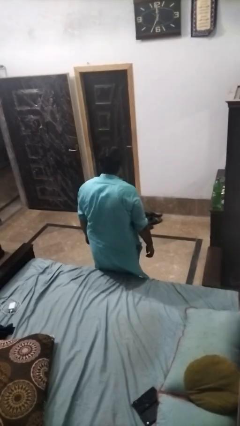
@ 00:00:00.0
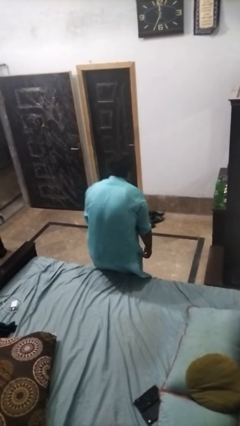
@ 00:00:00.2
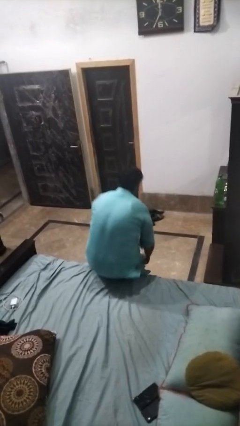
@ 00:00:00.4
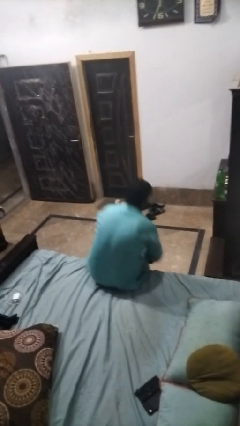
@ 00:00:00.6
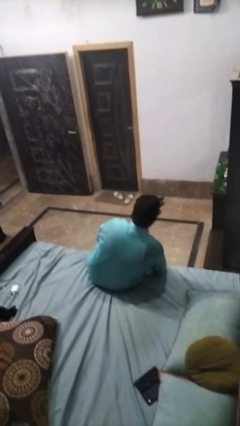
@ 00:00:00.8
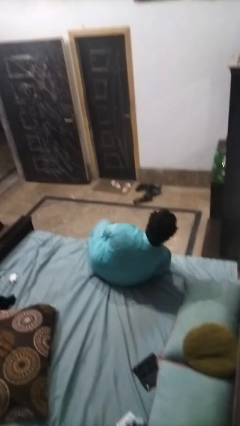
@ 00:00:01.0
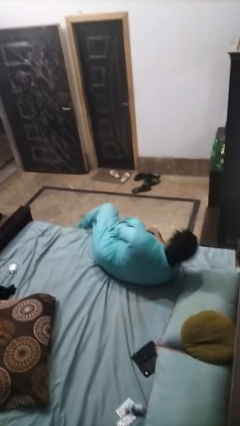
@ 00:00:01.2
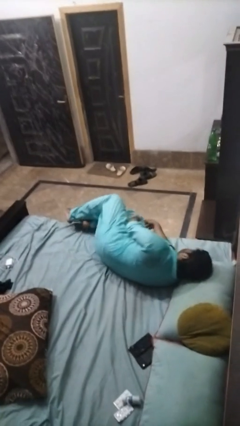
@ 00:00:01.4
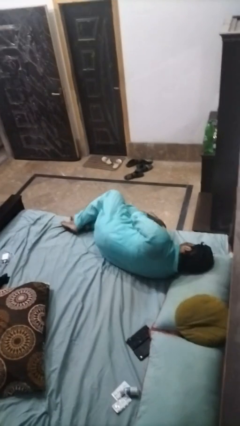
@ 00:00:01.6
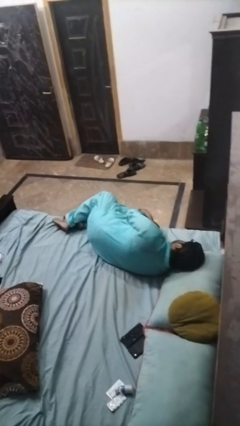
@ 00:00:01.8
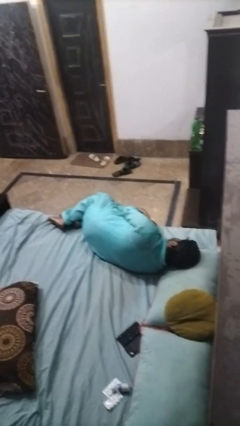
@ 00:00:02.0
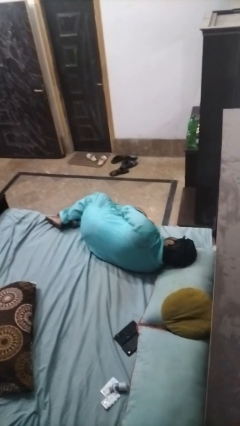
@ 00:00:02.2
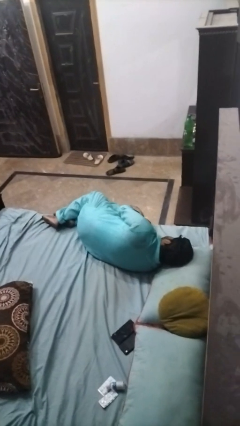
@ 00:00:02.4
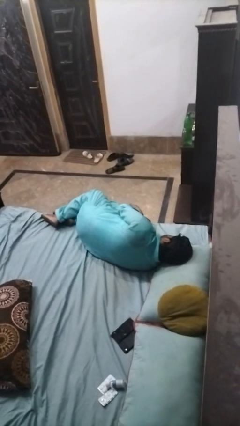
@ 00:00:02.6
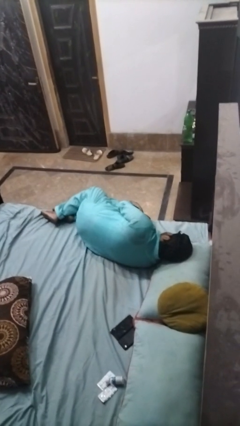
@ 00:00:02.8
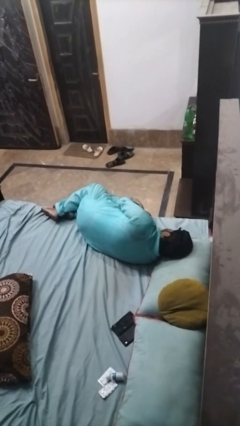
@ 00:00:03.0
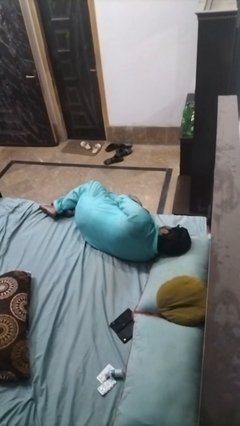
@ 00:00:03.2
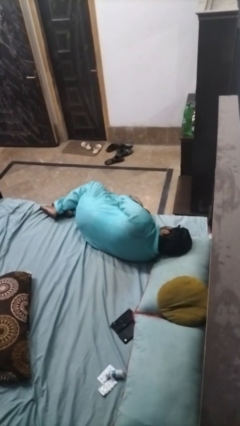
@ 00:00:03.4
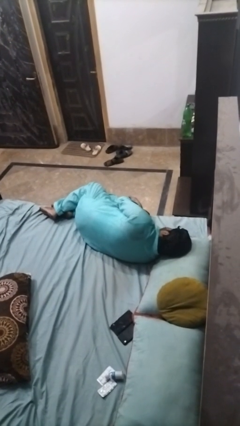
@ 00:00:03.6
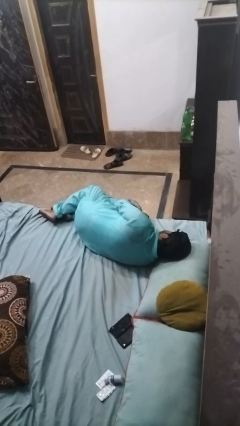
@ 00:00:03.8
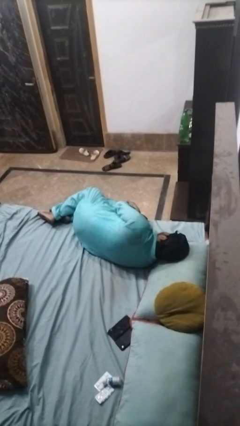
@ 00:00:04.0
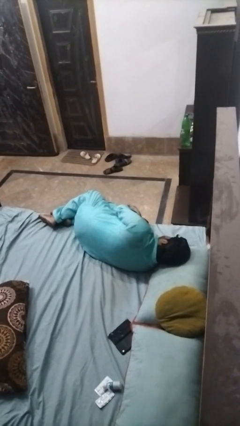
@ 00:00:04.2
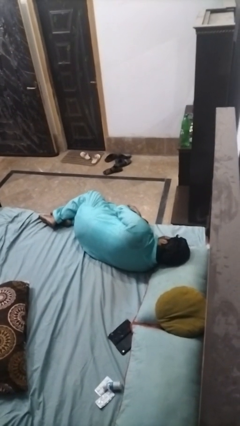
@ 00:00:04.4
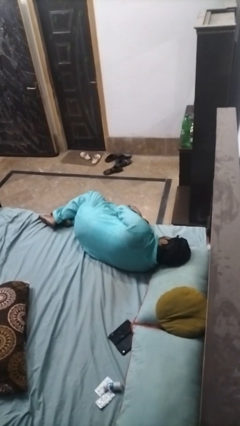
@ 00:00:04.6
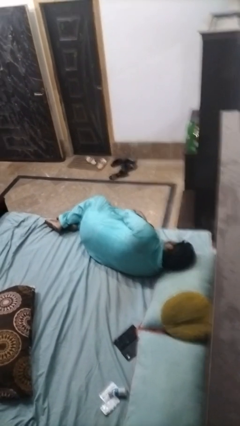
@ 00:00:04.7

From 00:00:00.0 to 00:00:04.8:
person lies down on bed

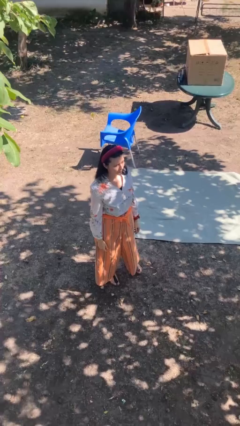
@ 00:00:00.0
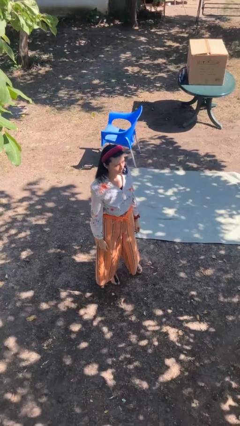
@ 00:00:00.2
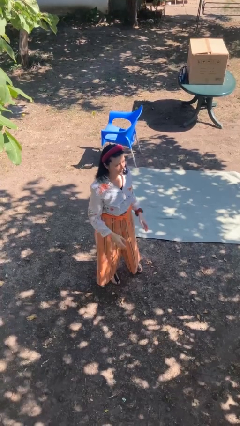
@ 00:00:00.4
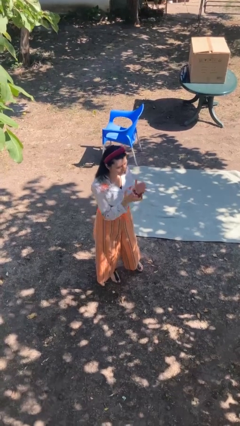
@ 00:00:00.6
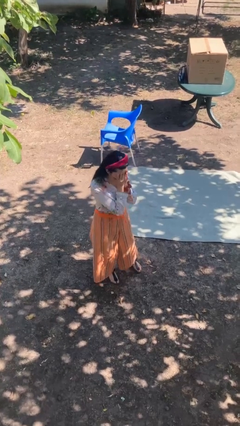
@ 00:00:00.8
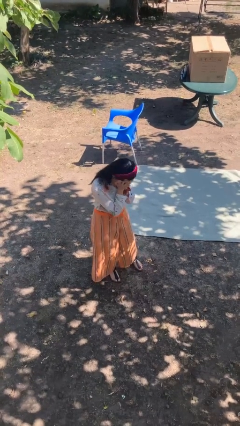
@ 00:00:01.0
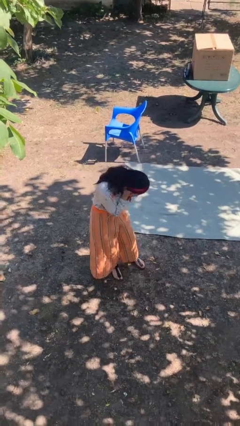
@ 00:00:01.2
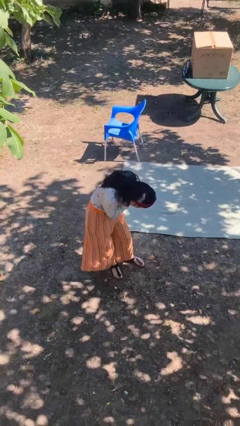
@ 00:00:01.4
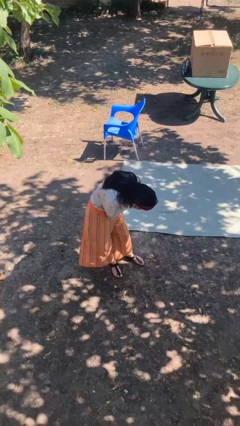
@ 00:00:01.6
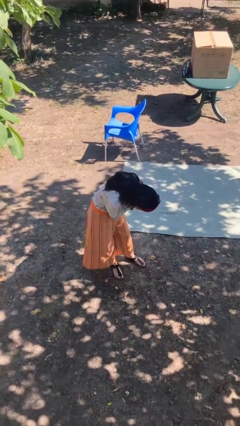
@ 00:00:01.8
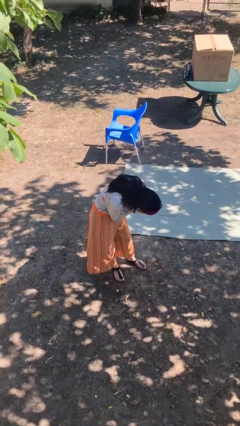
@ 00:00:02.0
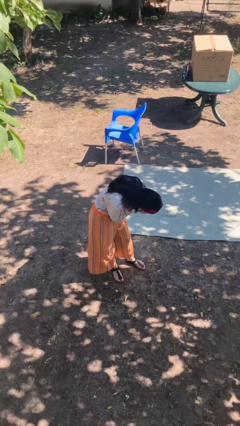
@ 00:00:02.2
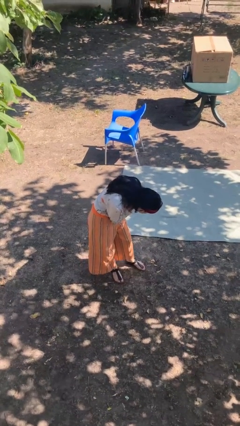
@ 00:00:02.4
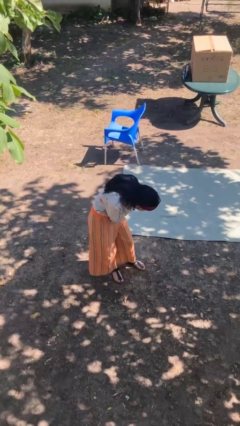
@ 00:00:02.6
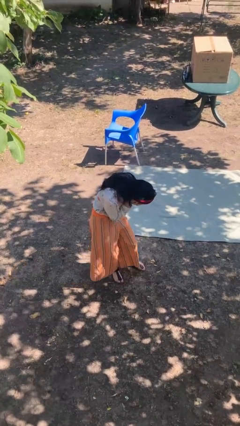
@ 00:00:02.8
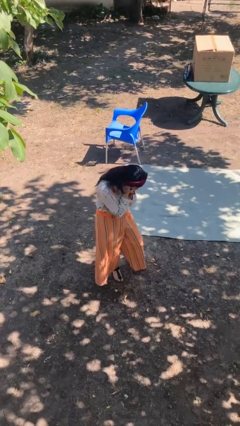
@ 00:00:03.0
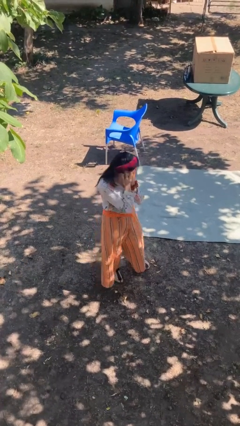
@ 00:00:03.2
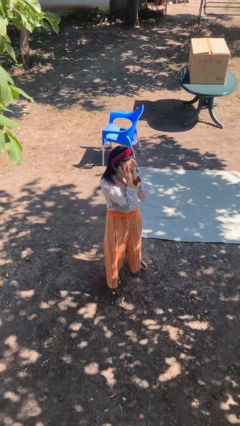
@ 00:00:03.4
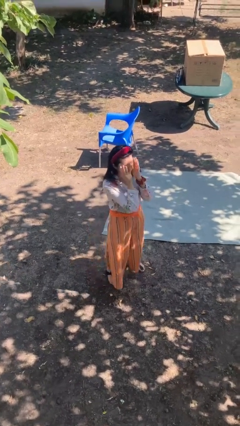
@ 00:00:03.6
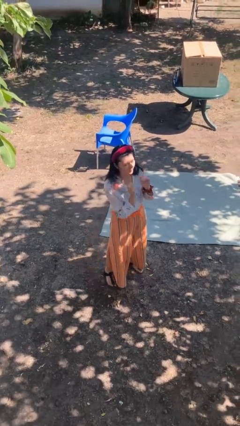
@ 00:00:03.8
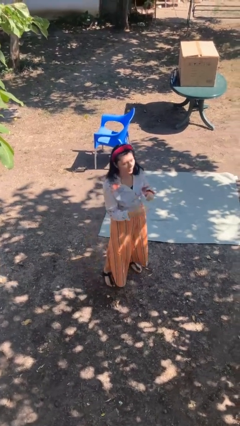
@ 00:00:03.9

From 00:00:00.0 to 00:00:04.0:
person covers face with hands

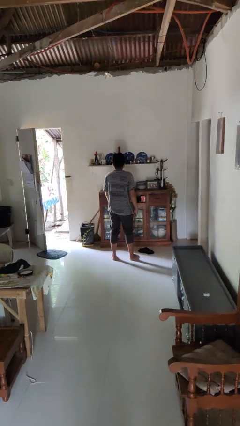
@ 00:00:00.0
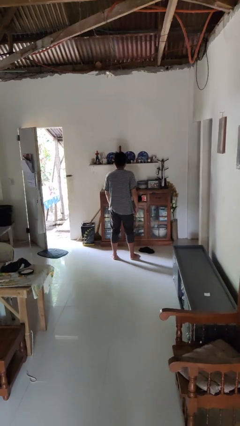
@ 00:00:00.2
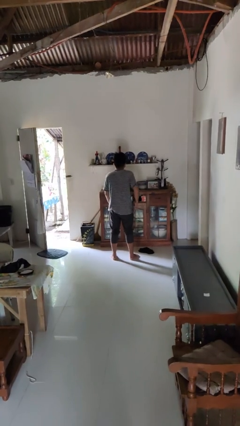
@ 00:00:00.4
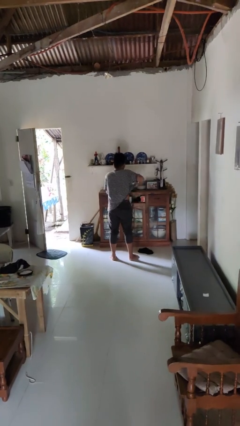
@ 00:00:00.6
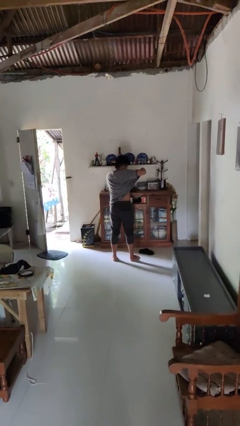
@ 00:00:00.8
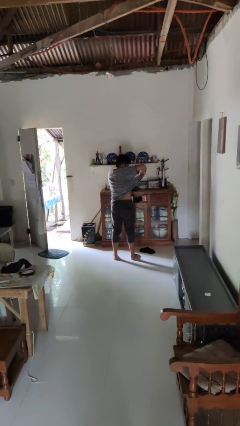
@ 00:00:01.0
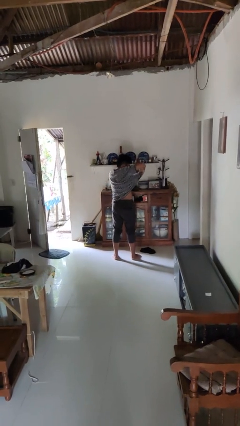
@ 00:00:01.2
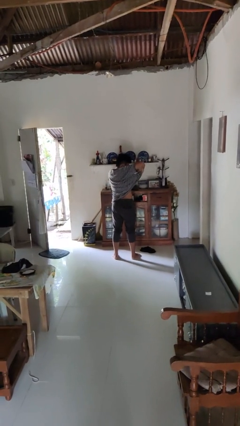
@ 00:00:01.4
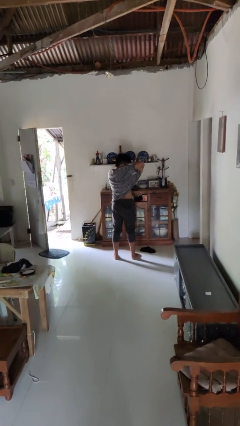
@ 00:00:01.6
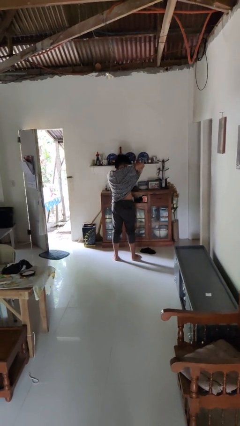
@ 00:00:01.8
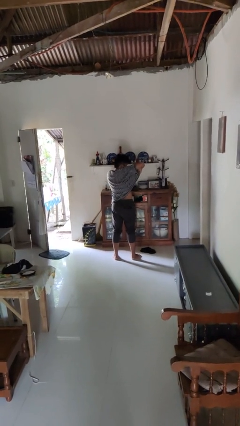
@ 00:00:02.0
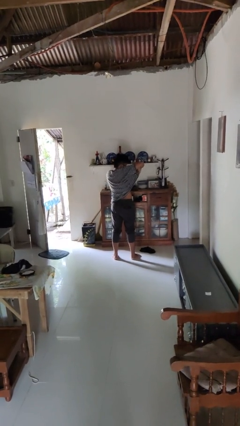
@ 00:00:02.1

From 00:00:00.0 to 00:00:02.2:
person applies deodorant

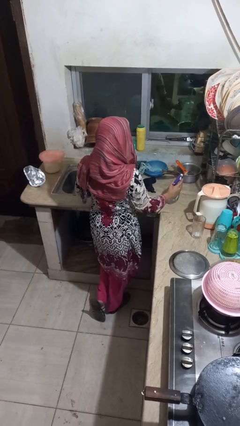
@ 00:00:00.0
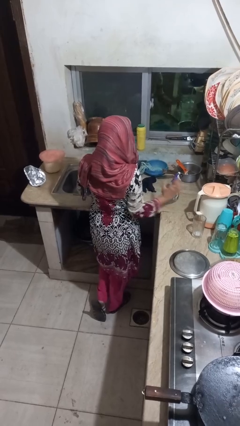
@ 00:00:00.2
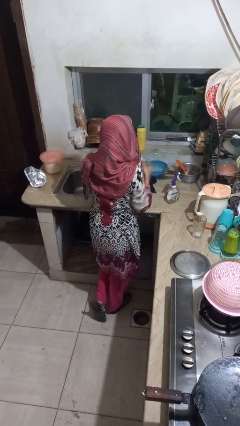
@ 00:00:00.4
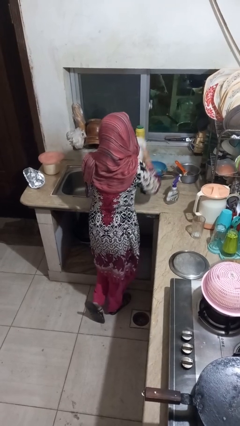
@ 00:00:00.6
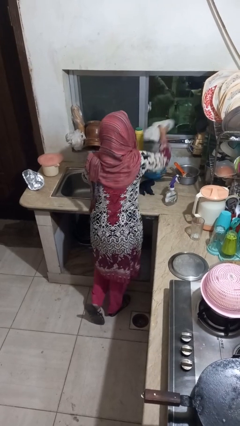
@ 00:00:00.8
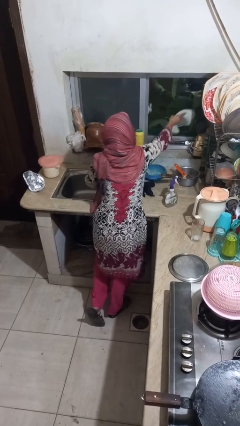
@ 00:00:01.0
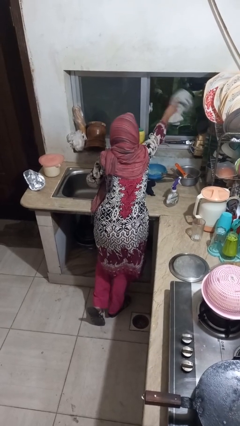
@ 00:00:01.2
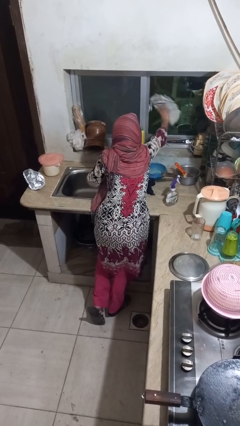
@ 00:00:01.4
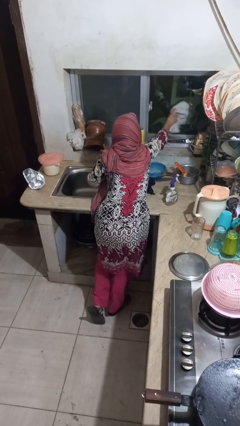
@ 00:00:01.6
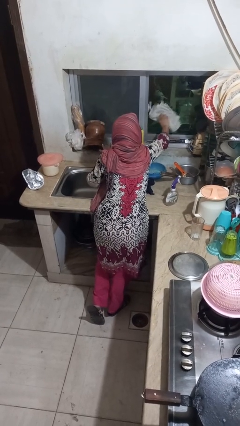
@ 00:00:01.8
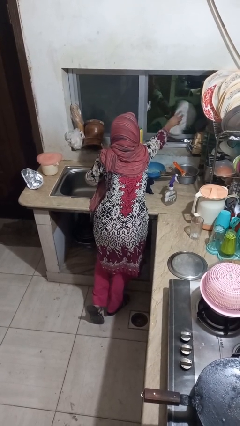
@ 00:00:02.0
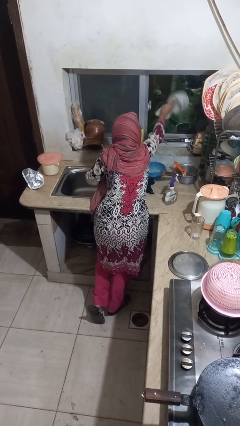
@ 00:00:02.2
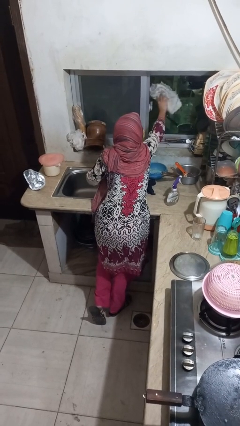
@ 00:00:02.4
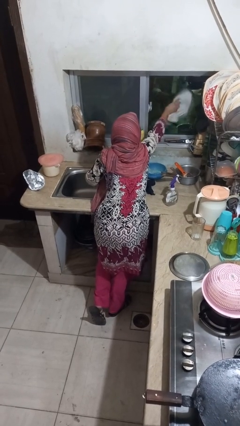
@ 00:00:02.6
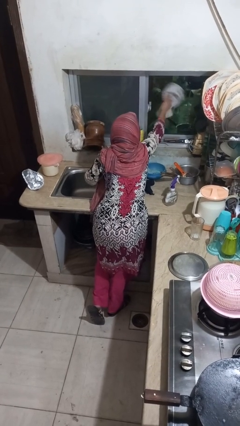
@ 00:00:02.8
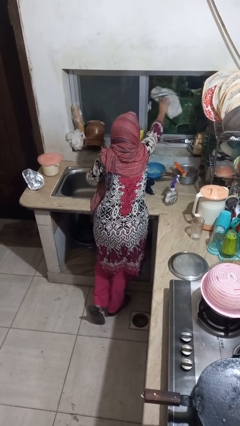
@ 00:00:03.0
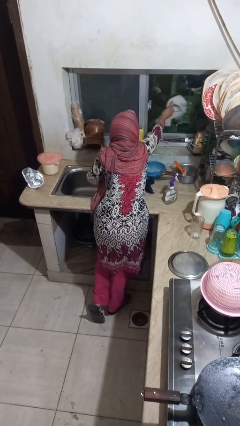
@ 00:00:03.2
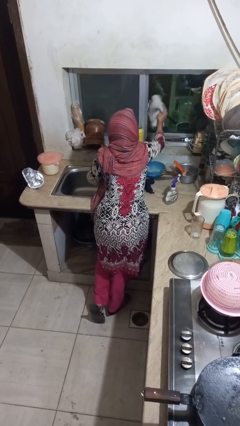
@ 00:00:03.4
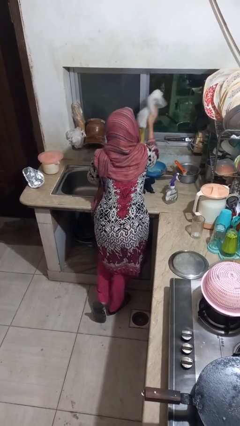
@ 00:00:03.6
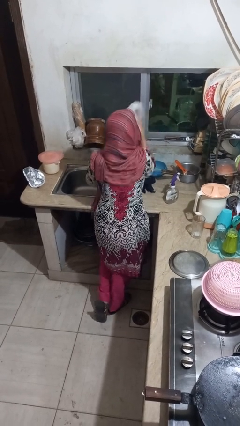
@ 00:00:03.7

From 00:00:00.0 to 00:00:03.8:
person washes window

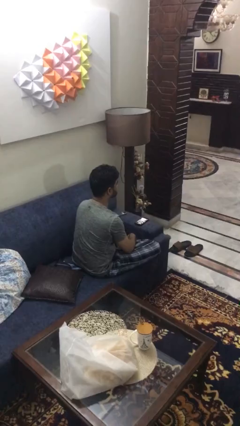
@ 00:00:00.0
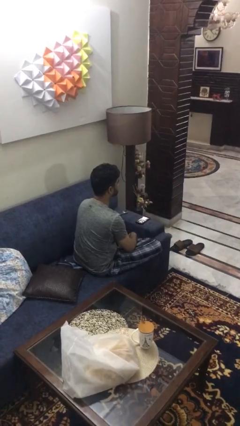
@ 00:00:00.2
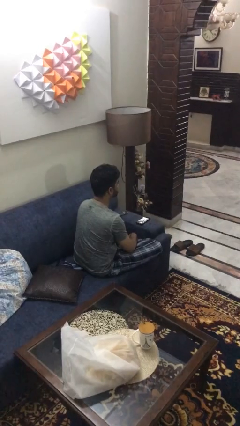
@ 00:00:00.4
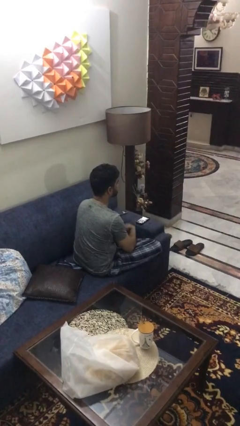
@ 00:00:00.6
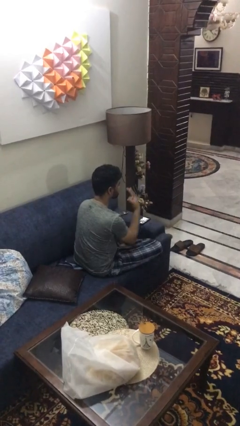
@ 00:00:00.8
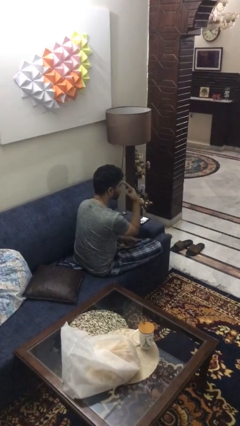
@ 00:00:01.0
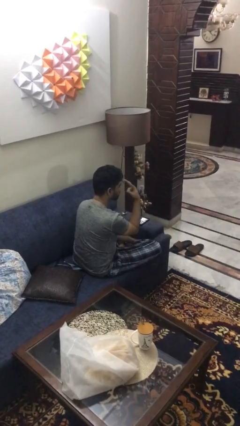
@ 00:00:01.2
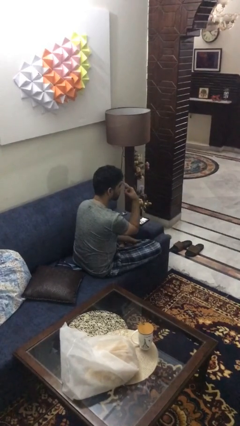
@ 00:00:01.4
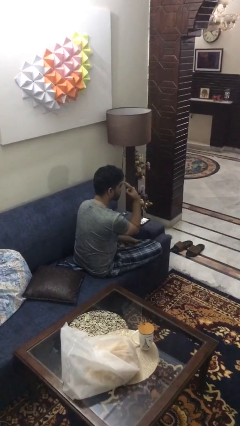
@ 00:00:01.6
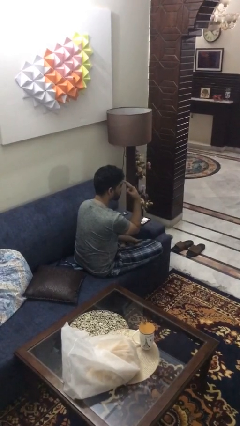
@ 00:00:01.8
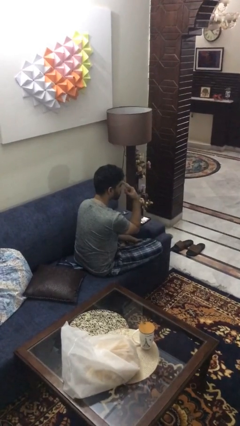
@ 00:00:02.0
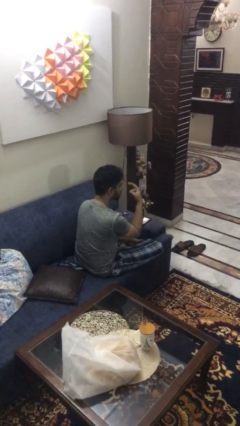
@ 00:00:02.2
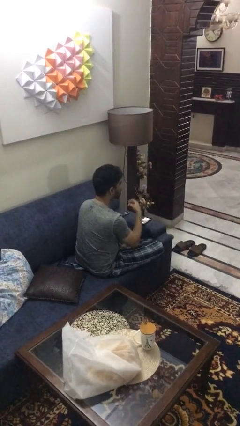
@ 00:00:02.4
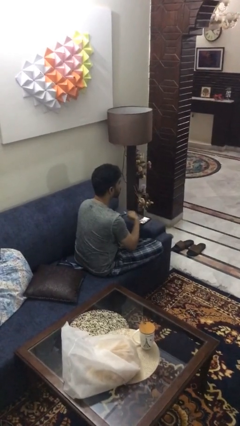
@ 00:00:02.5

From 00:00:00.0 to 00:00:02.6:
person gestures watch closely
